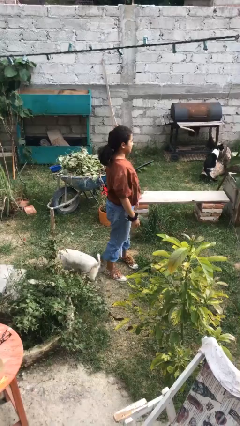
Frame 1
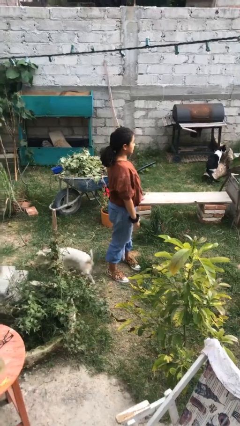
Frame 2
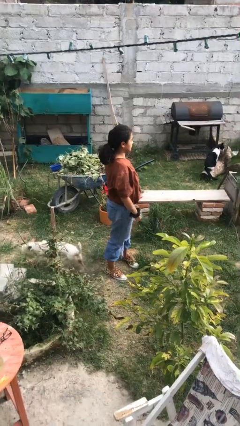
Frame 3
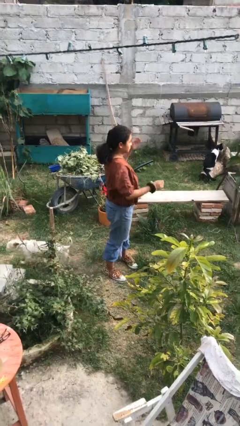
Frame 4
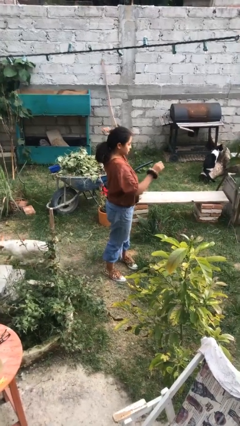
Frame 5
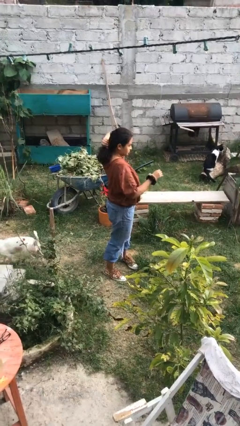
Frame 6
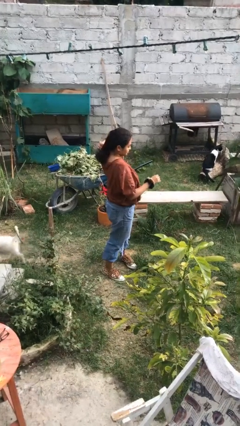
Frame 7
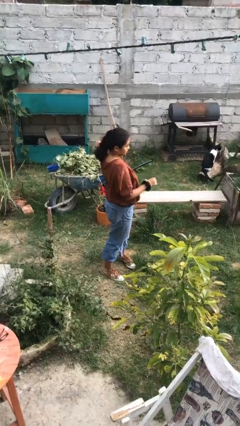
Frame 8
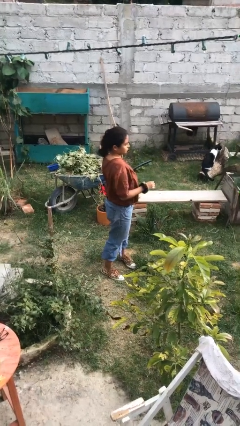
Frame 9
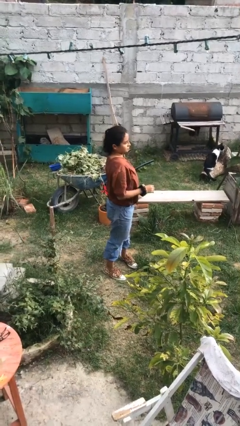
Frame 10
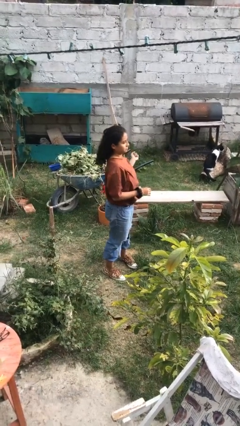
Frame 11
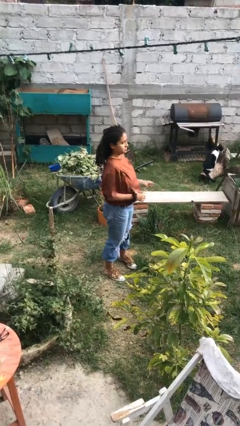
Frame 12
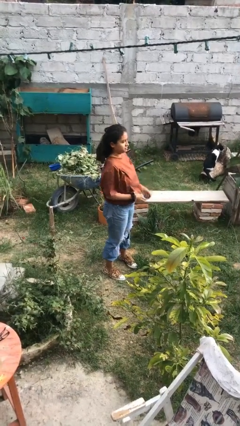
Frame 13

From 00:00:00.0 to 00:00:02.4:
person takes off hairtie

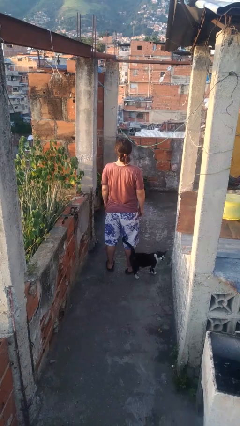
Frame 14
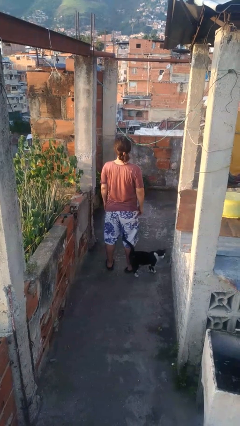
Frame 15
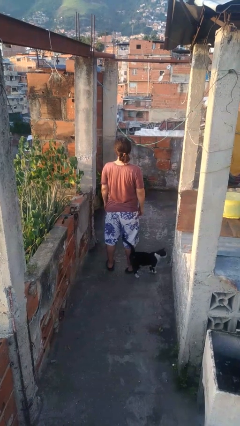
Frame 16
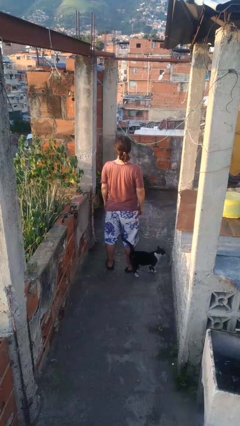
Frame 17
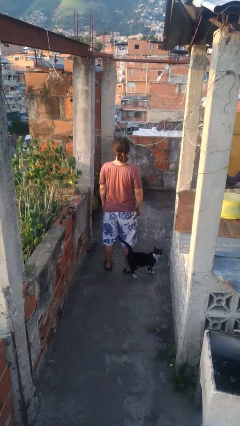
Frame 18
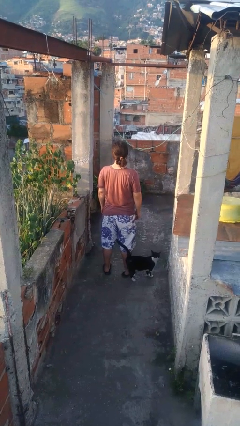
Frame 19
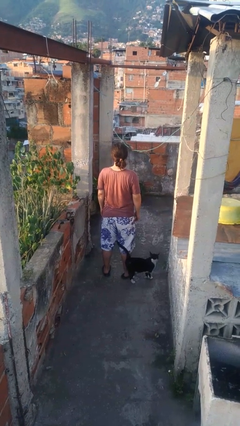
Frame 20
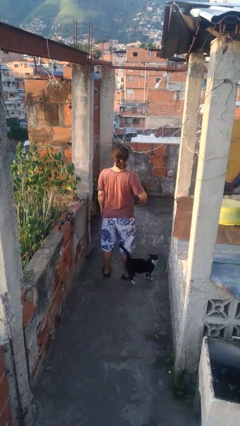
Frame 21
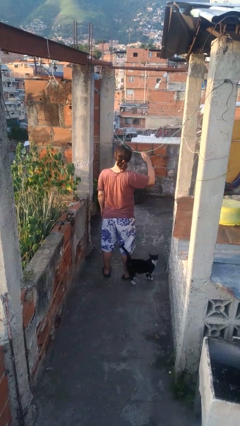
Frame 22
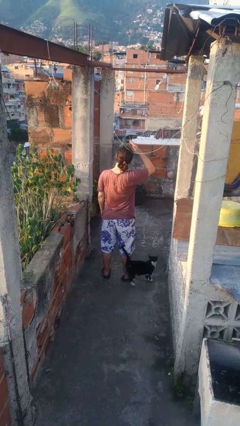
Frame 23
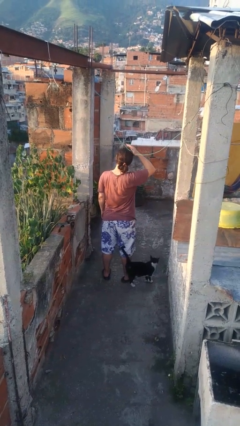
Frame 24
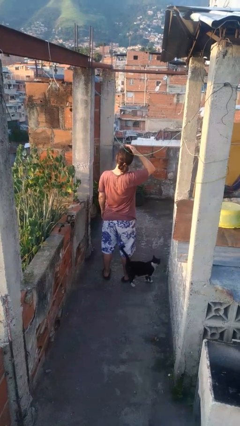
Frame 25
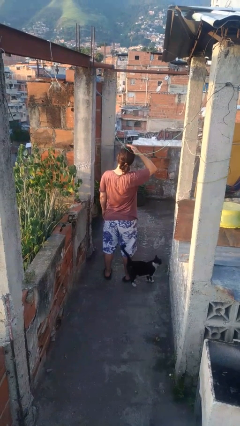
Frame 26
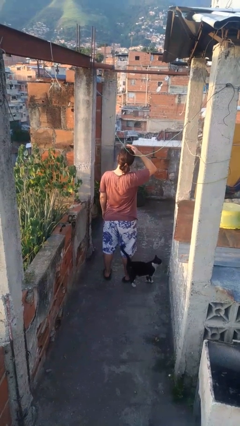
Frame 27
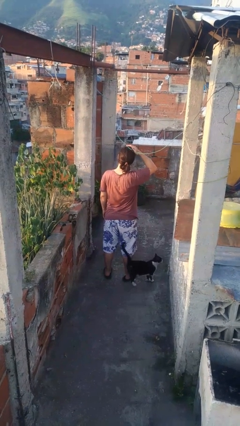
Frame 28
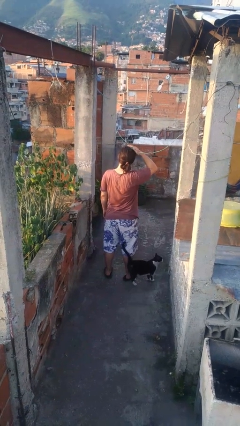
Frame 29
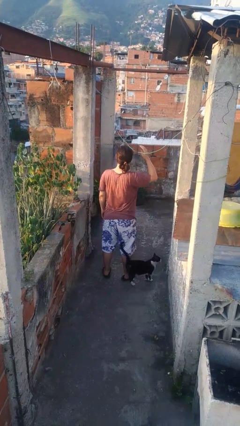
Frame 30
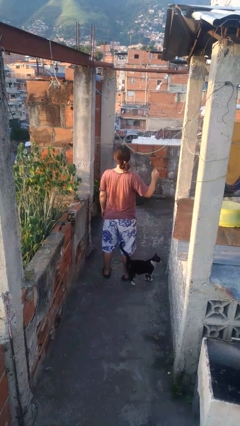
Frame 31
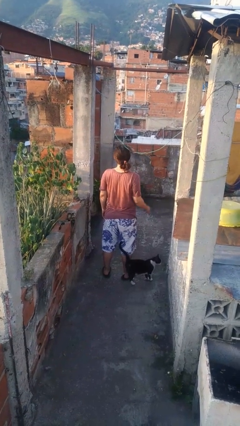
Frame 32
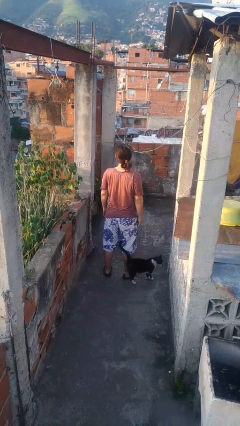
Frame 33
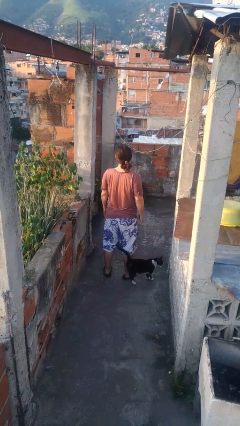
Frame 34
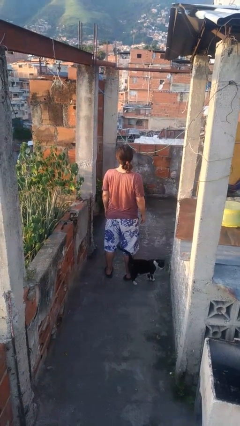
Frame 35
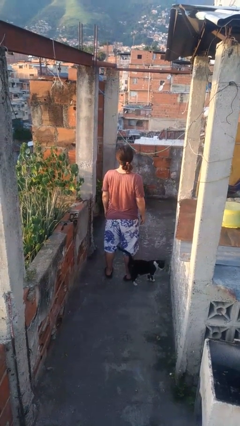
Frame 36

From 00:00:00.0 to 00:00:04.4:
person pats head

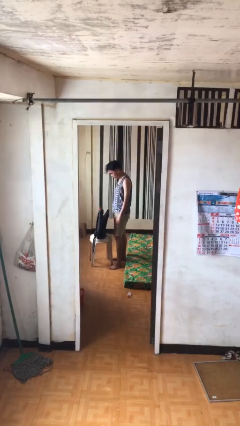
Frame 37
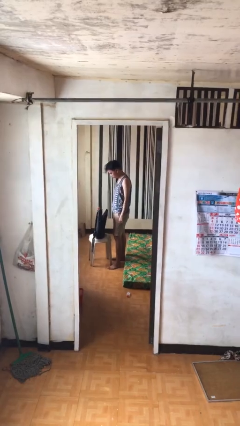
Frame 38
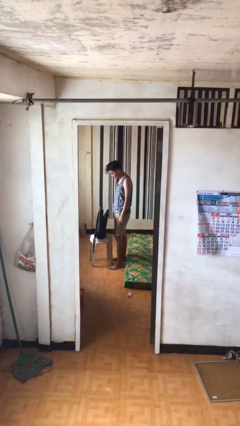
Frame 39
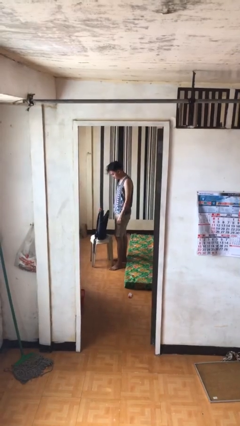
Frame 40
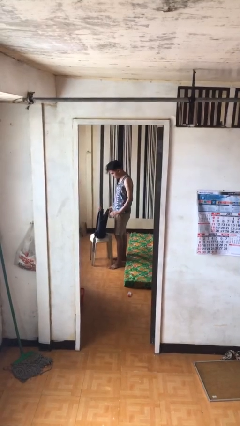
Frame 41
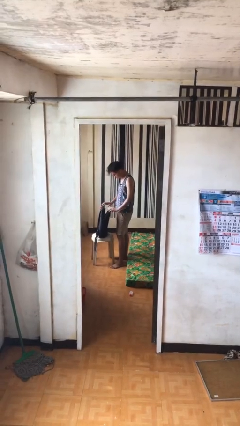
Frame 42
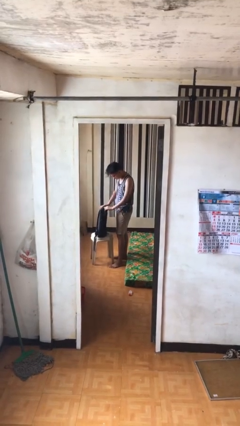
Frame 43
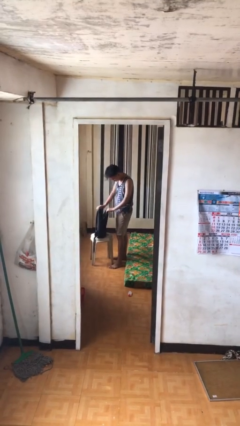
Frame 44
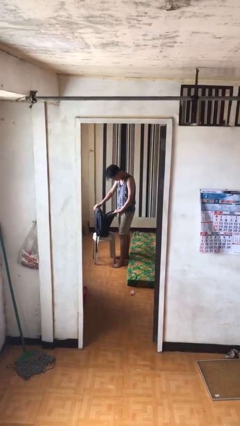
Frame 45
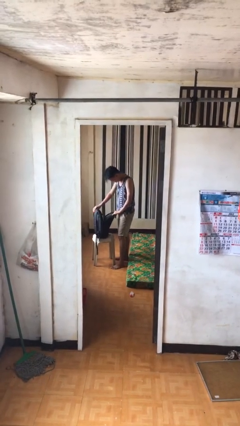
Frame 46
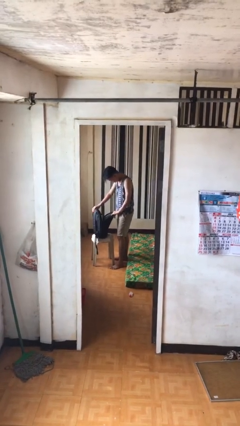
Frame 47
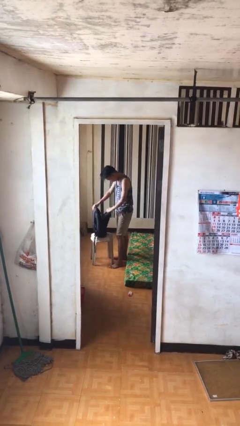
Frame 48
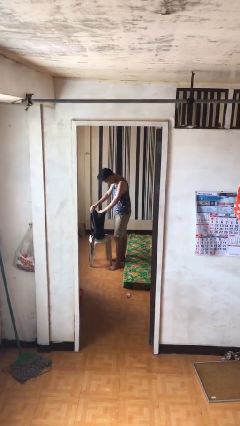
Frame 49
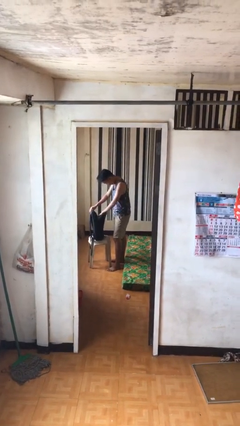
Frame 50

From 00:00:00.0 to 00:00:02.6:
person searches in backpack

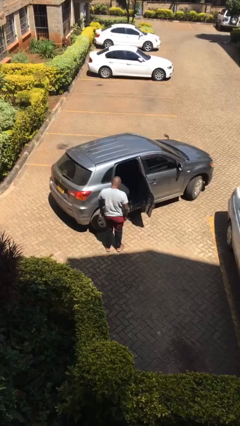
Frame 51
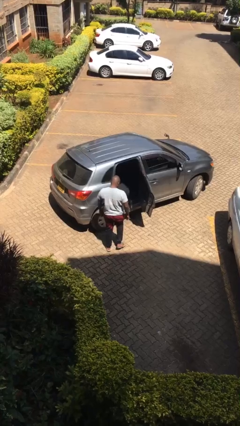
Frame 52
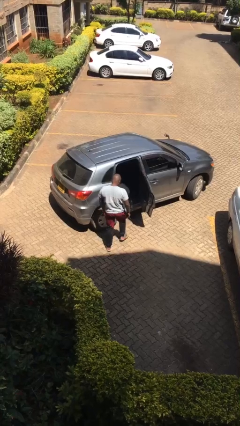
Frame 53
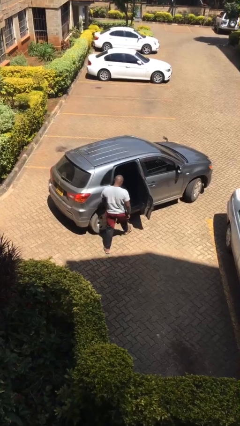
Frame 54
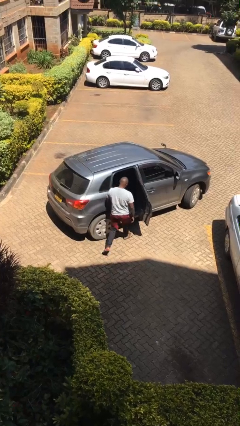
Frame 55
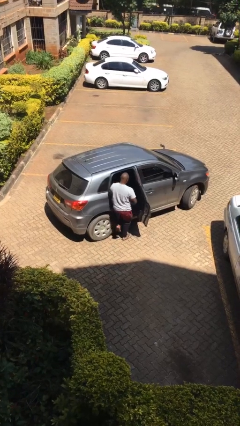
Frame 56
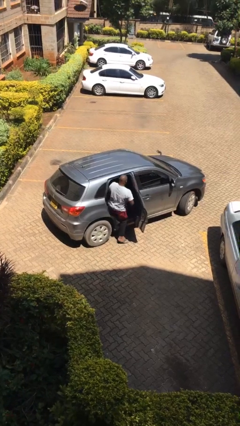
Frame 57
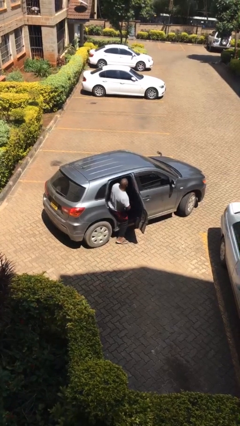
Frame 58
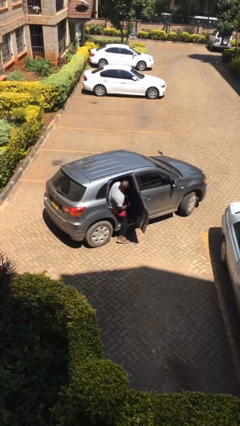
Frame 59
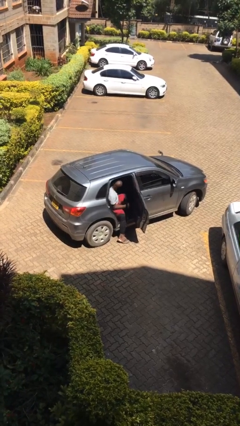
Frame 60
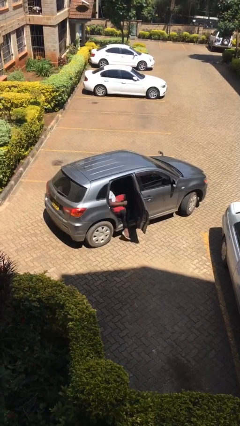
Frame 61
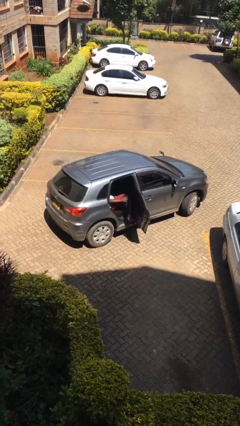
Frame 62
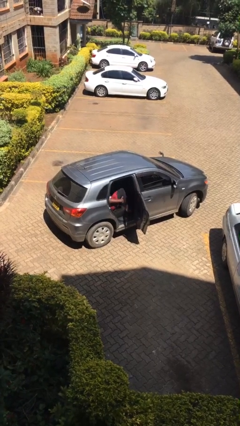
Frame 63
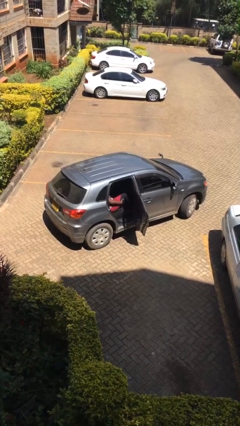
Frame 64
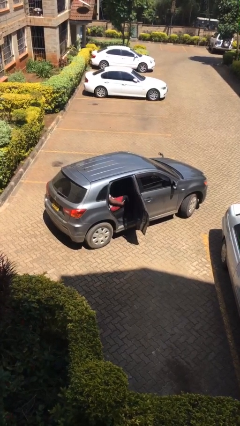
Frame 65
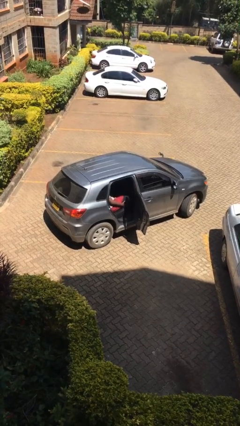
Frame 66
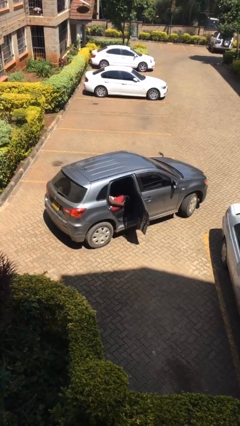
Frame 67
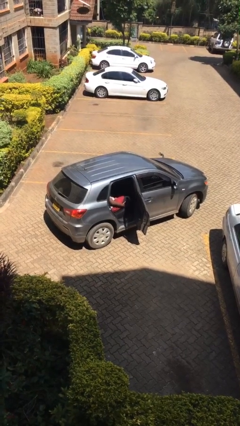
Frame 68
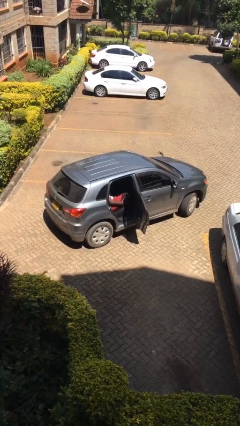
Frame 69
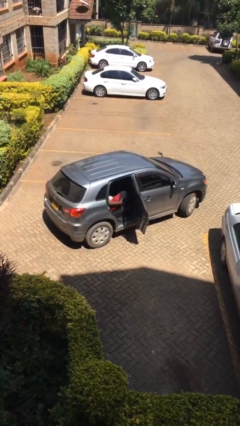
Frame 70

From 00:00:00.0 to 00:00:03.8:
person enters car

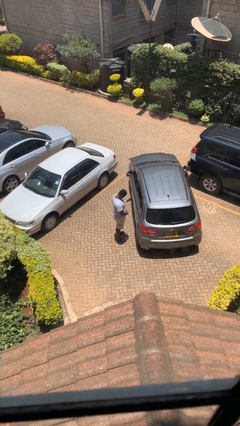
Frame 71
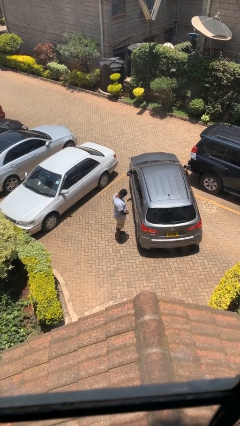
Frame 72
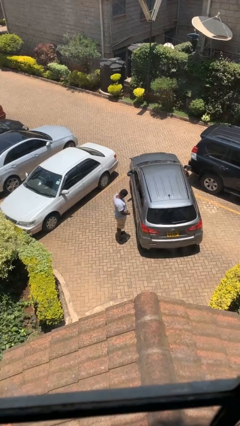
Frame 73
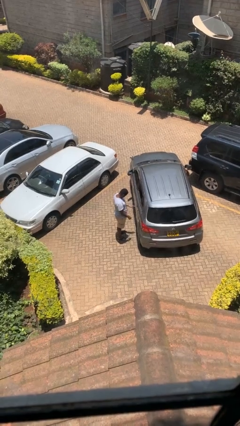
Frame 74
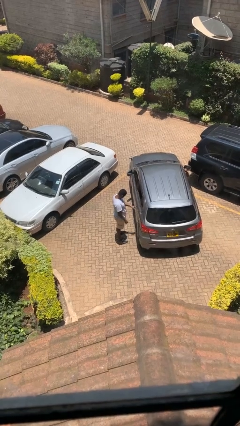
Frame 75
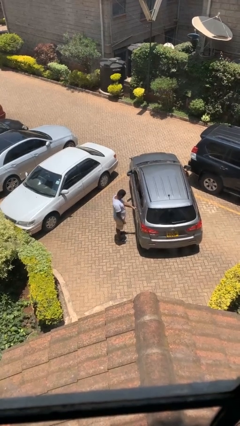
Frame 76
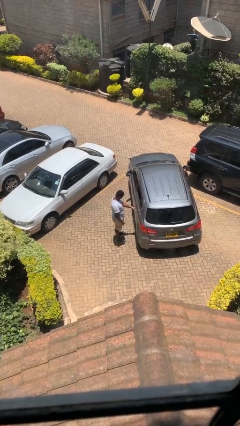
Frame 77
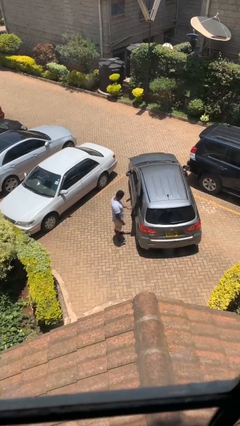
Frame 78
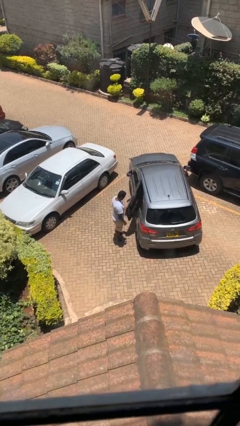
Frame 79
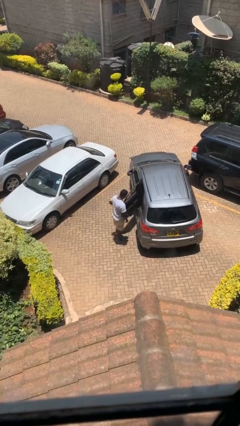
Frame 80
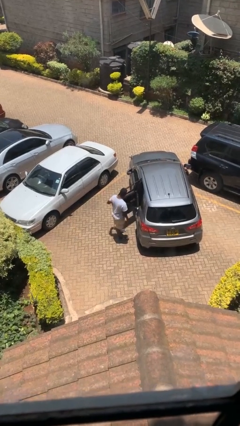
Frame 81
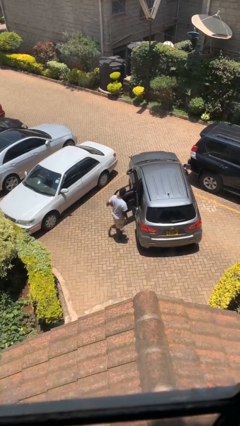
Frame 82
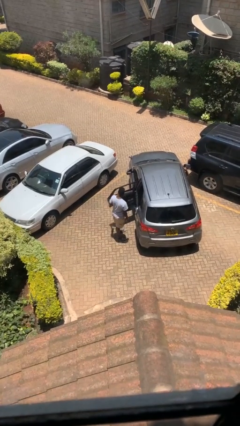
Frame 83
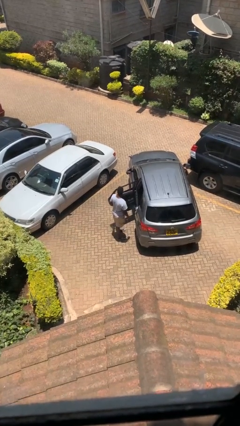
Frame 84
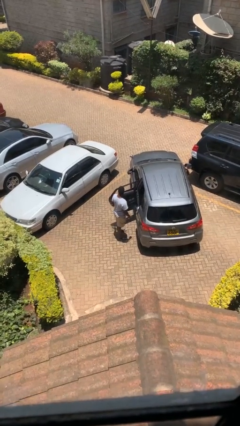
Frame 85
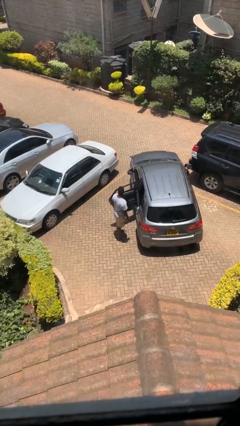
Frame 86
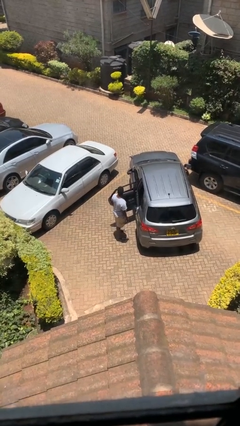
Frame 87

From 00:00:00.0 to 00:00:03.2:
person opens car door

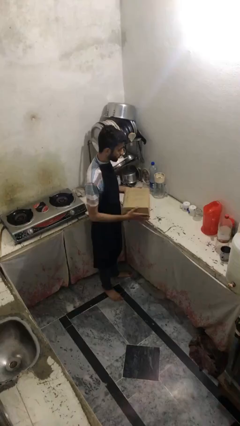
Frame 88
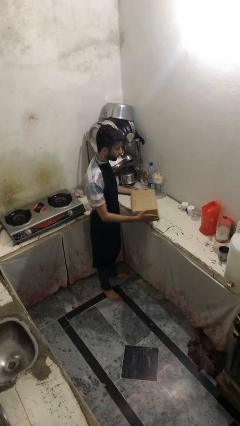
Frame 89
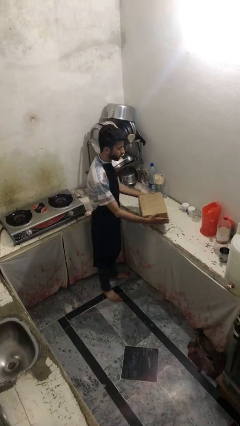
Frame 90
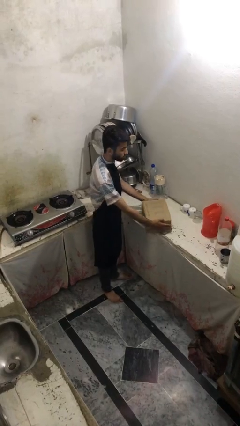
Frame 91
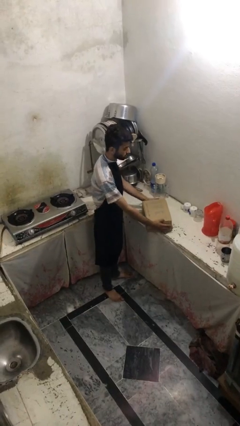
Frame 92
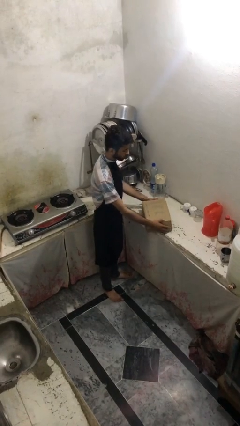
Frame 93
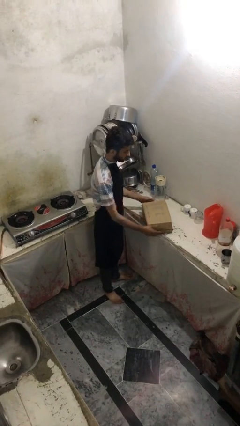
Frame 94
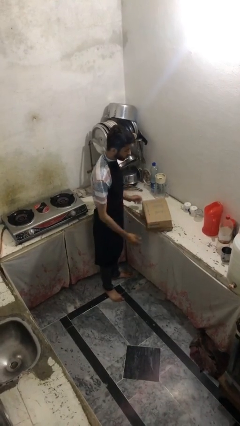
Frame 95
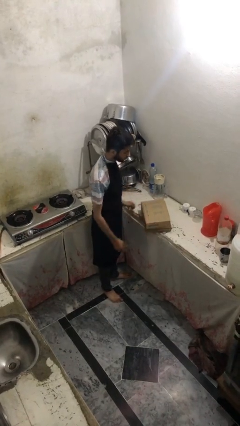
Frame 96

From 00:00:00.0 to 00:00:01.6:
person puts down object on table
